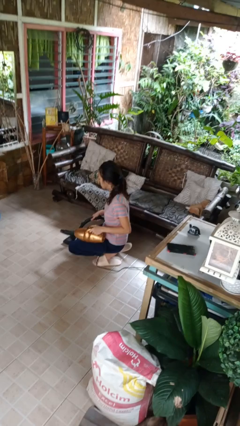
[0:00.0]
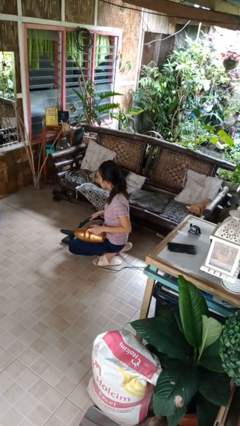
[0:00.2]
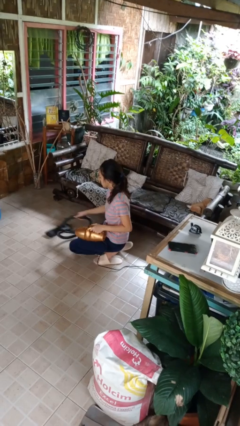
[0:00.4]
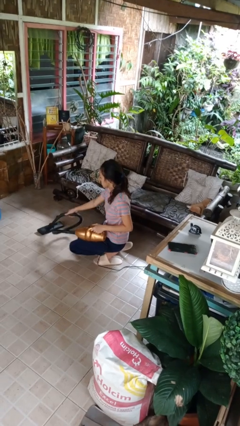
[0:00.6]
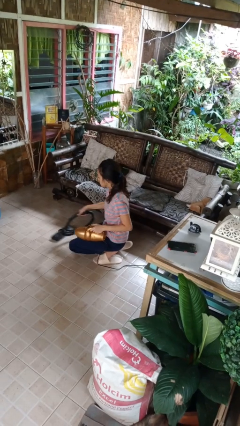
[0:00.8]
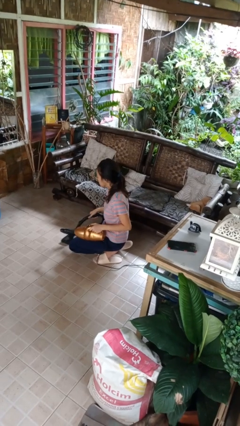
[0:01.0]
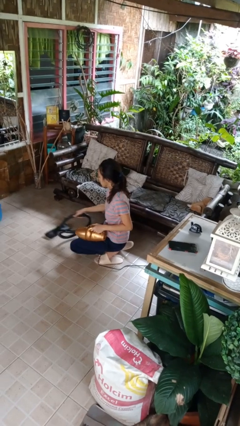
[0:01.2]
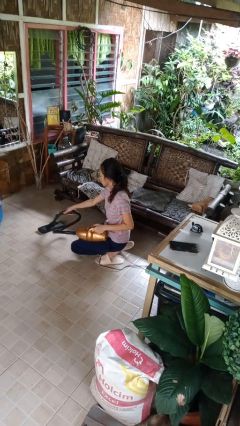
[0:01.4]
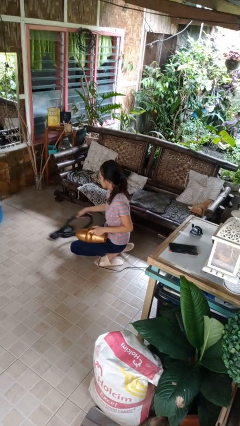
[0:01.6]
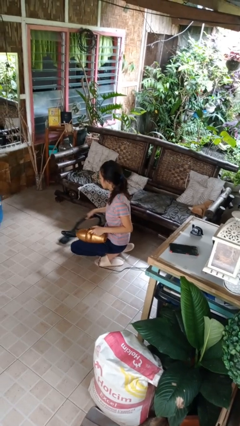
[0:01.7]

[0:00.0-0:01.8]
person vacuums carpet

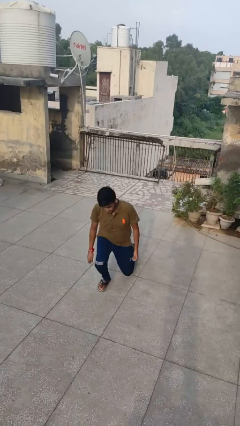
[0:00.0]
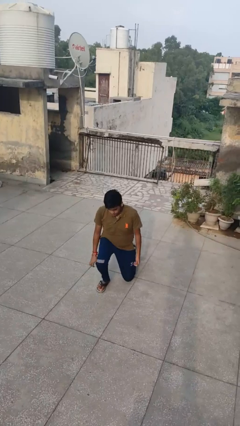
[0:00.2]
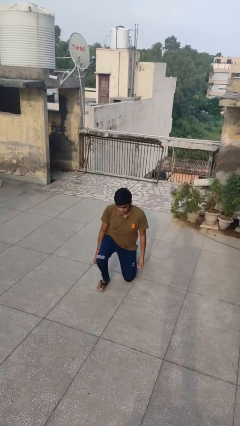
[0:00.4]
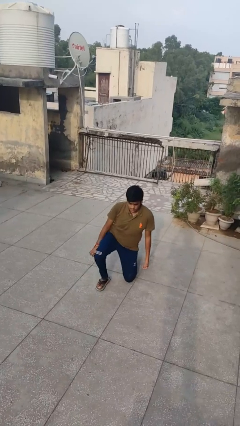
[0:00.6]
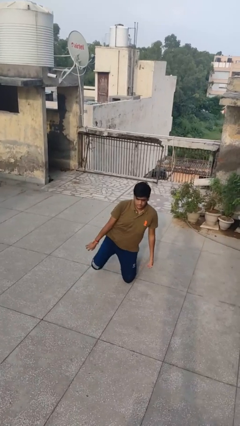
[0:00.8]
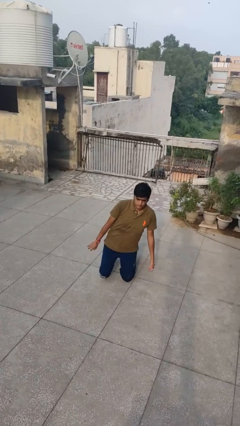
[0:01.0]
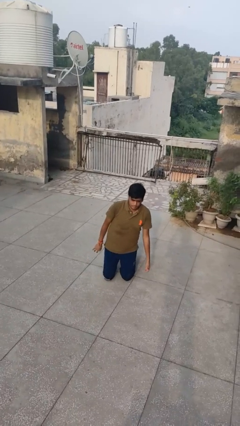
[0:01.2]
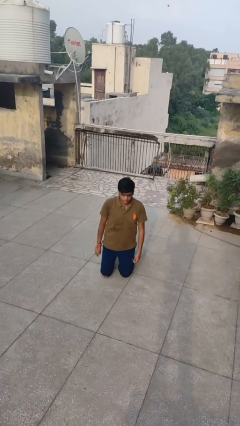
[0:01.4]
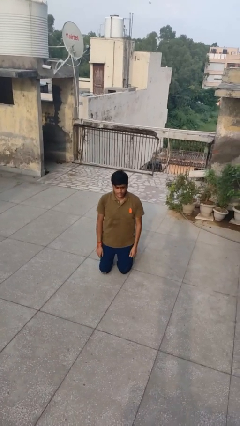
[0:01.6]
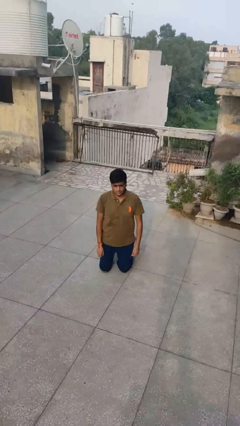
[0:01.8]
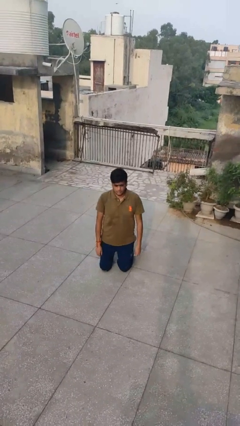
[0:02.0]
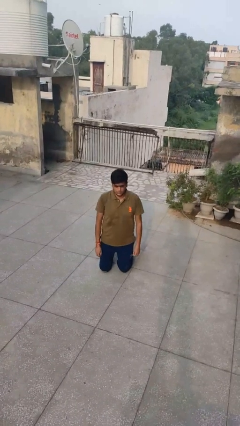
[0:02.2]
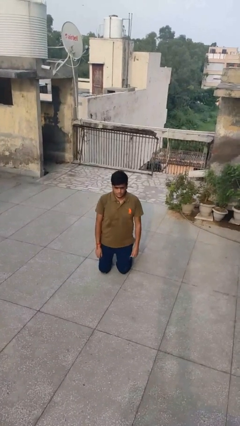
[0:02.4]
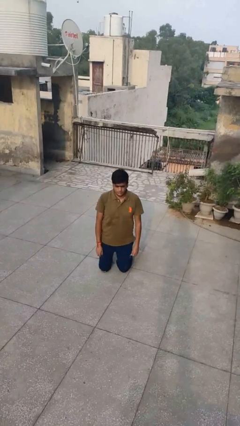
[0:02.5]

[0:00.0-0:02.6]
person kneels

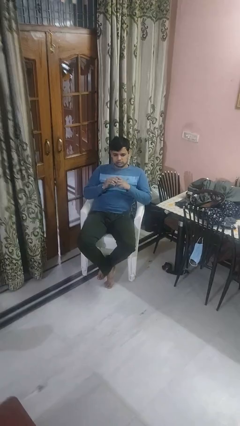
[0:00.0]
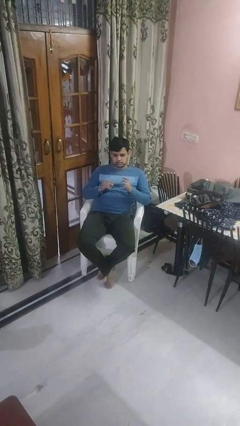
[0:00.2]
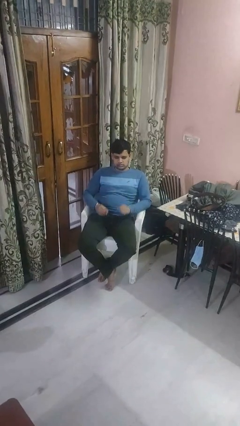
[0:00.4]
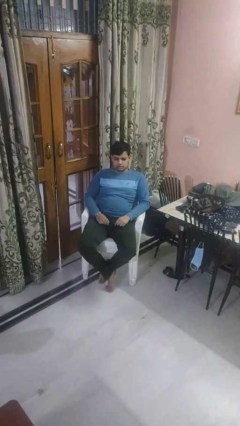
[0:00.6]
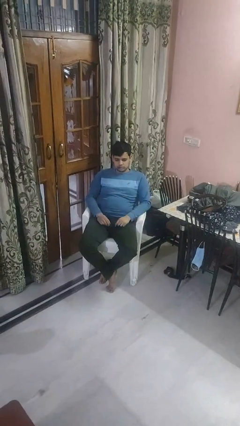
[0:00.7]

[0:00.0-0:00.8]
person takes off ring

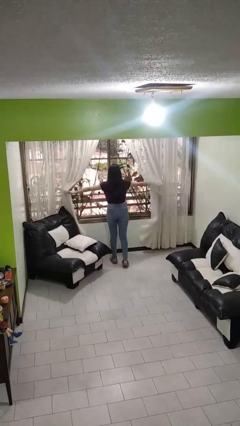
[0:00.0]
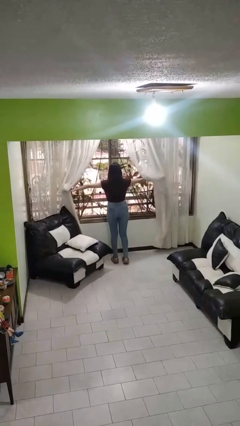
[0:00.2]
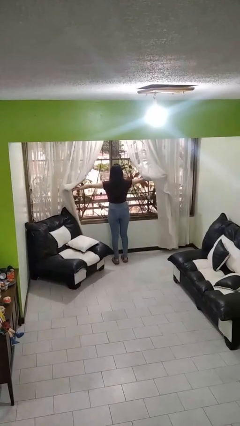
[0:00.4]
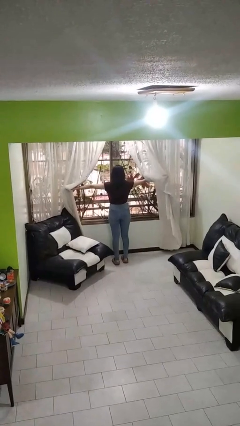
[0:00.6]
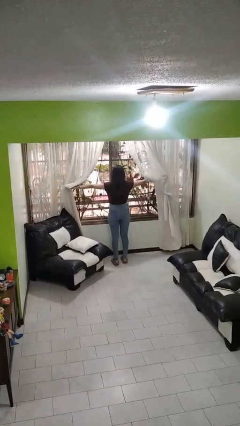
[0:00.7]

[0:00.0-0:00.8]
person opens curtains

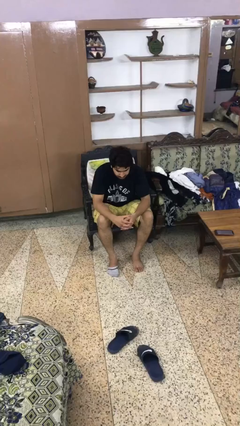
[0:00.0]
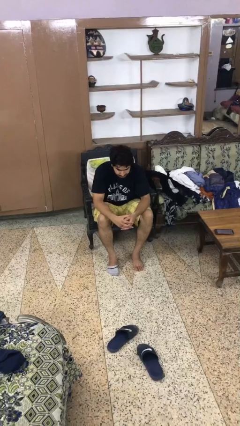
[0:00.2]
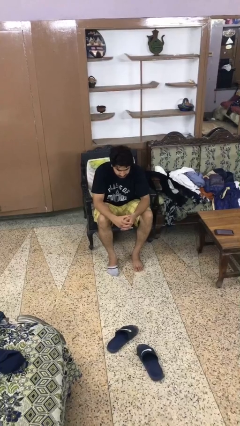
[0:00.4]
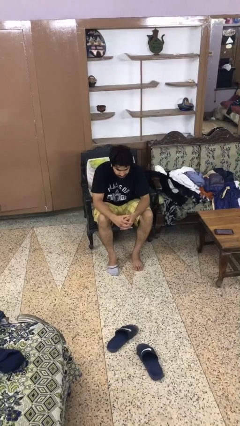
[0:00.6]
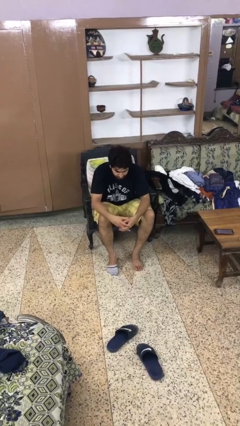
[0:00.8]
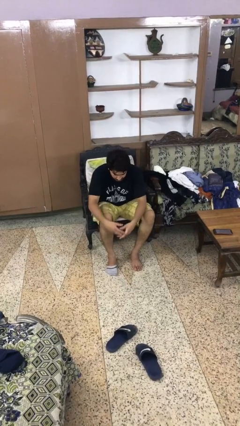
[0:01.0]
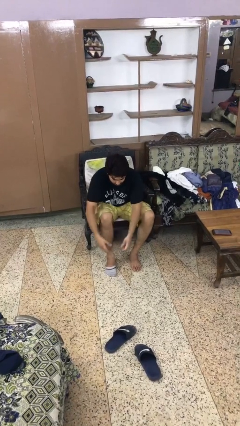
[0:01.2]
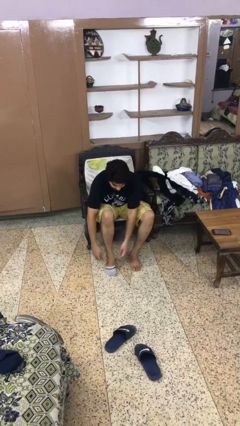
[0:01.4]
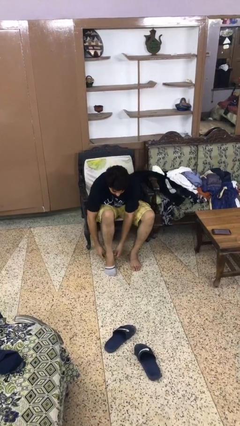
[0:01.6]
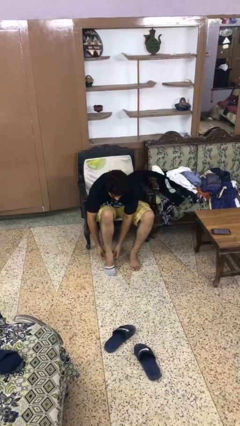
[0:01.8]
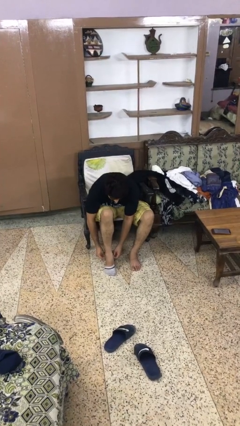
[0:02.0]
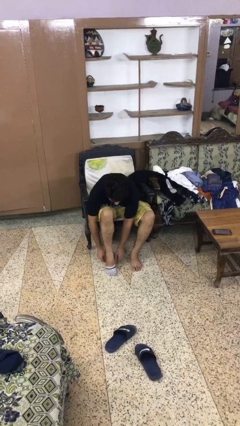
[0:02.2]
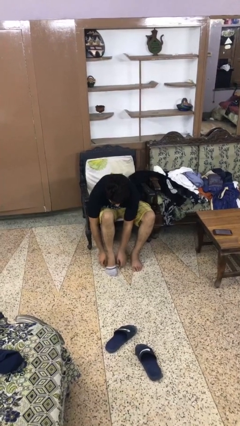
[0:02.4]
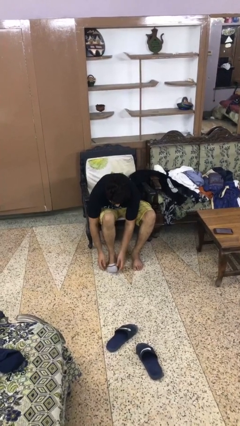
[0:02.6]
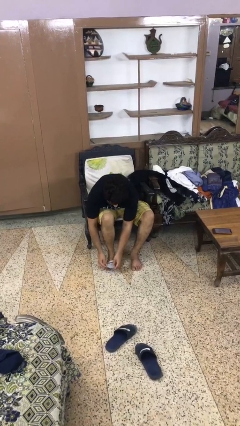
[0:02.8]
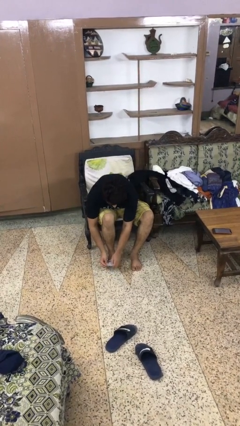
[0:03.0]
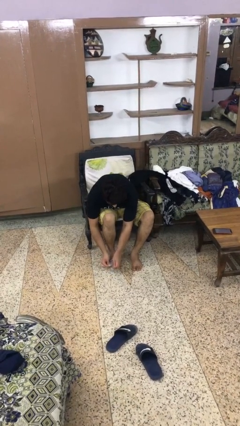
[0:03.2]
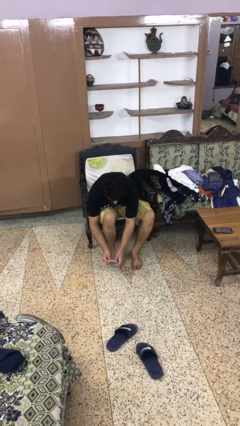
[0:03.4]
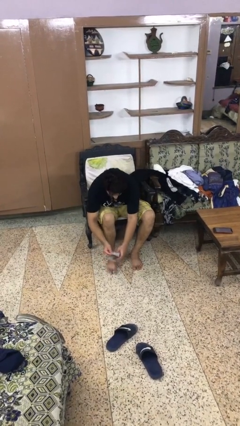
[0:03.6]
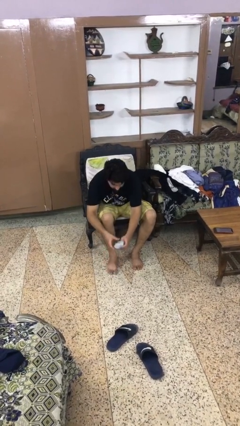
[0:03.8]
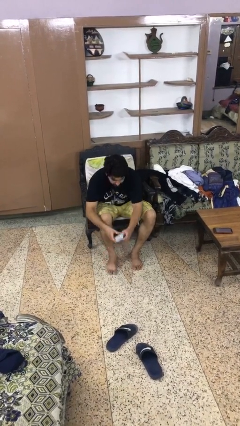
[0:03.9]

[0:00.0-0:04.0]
person takes off socks

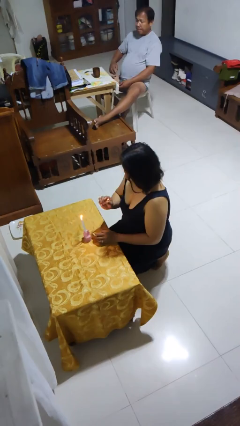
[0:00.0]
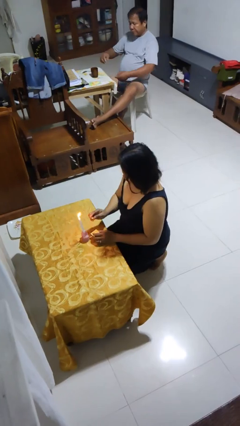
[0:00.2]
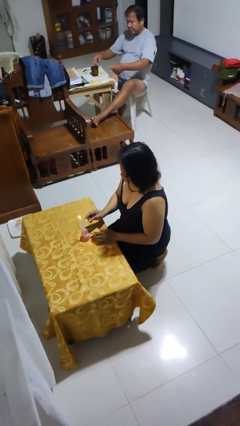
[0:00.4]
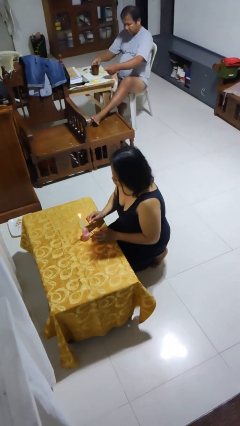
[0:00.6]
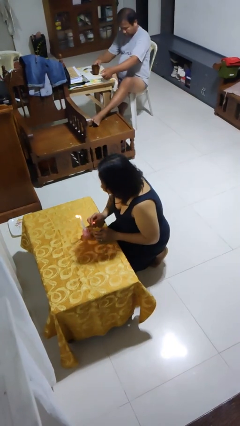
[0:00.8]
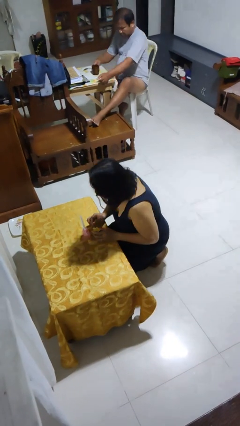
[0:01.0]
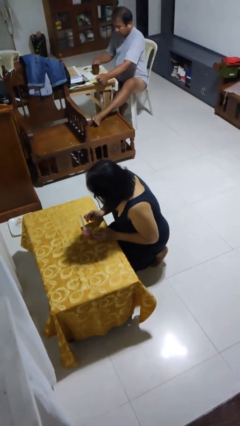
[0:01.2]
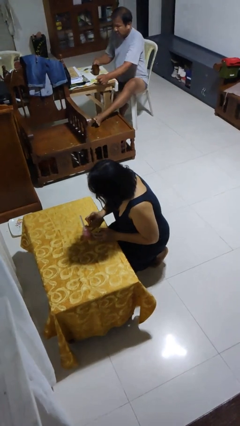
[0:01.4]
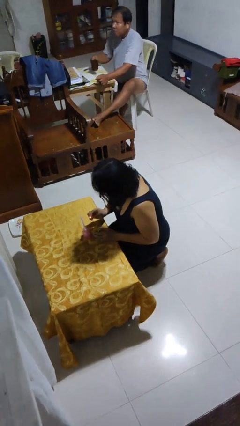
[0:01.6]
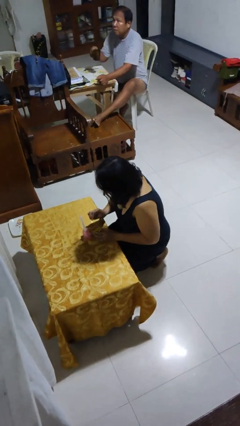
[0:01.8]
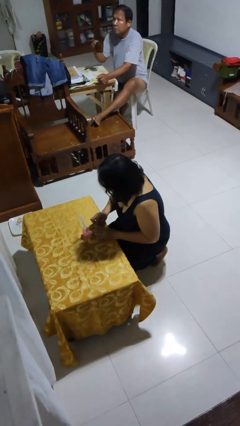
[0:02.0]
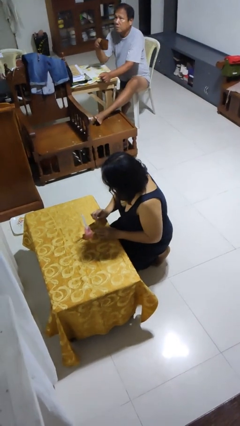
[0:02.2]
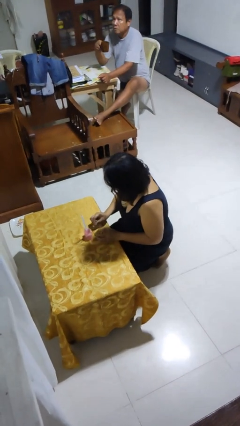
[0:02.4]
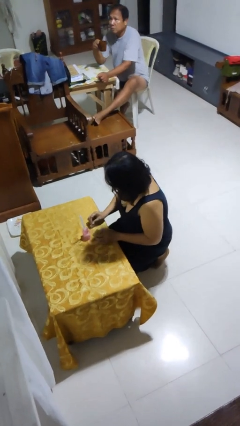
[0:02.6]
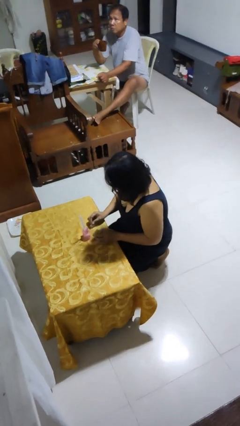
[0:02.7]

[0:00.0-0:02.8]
person extinguishes candle

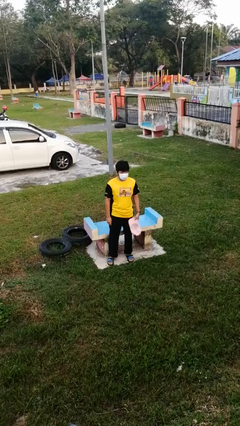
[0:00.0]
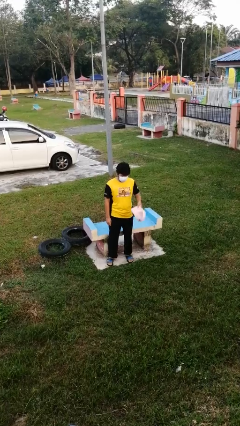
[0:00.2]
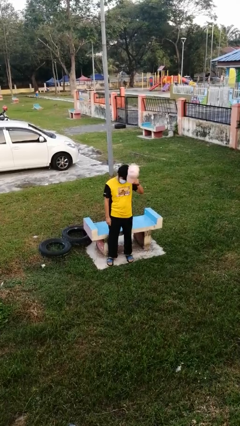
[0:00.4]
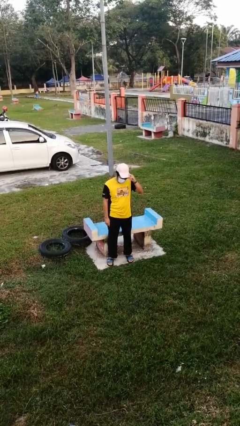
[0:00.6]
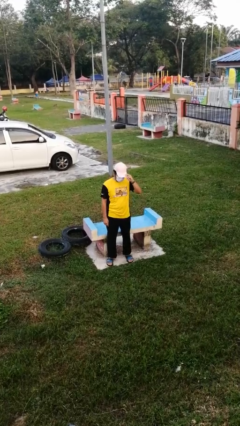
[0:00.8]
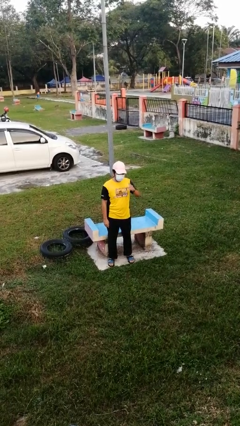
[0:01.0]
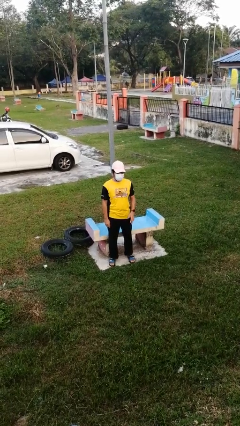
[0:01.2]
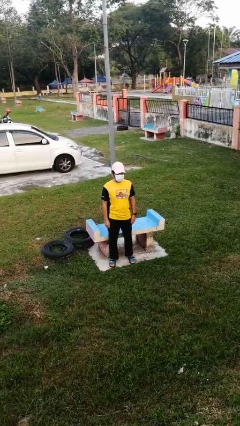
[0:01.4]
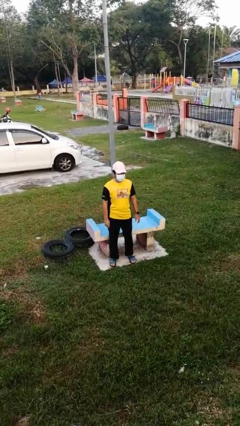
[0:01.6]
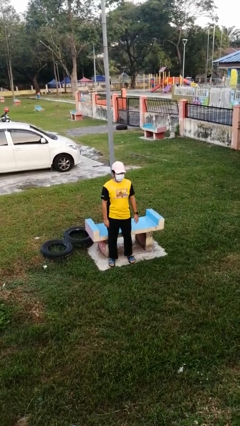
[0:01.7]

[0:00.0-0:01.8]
person puts on hat

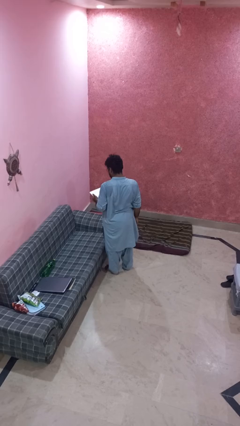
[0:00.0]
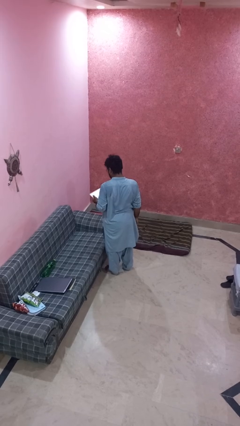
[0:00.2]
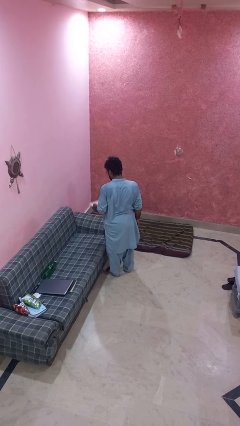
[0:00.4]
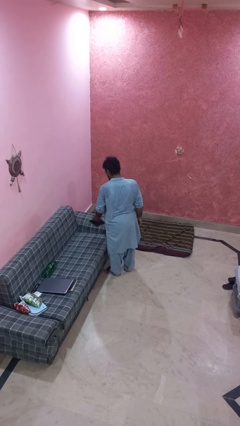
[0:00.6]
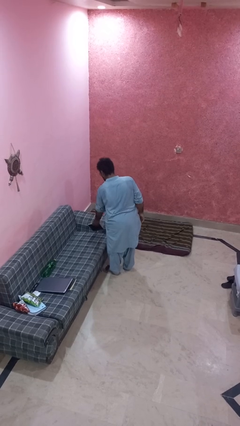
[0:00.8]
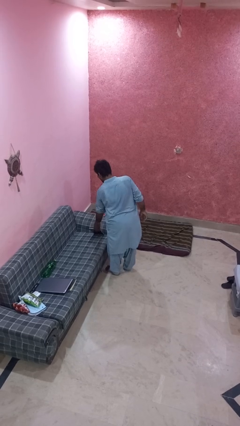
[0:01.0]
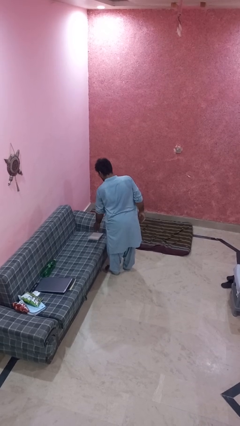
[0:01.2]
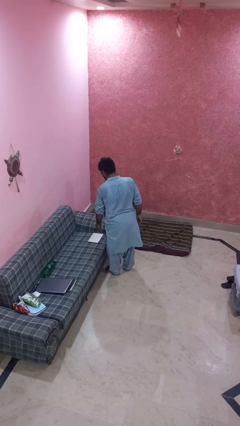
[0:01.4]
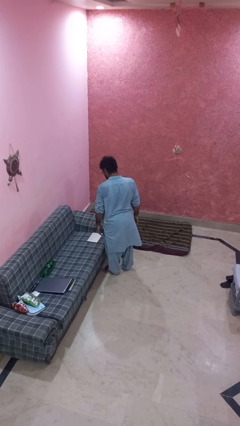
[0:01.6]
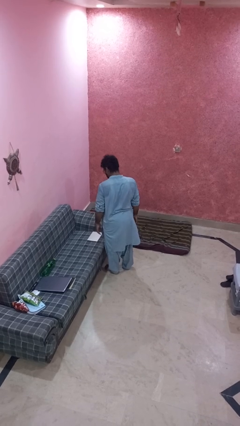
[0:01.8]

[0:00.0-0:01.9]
person puts down object on couch

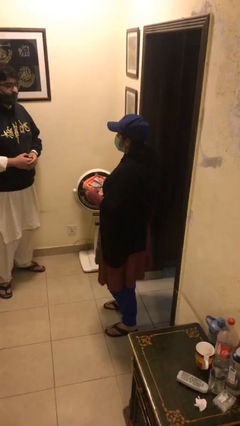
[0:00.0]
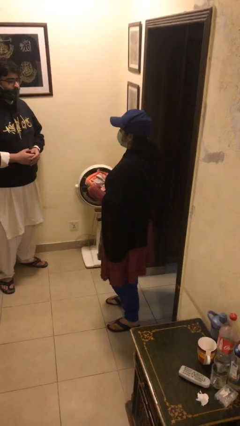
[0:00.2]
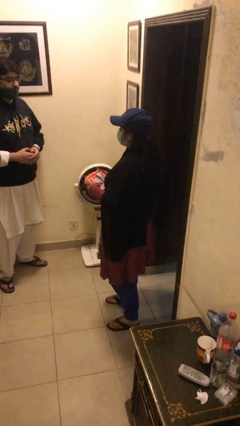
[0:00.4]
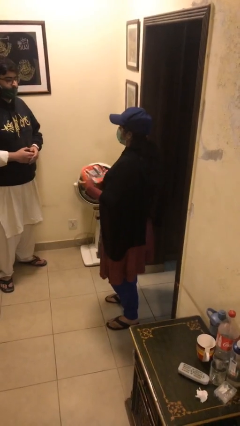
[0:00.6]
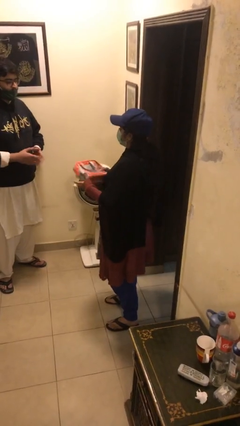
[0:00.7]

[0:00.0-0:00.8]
person transfers object to person
